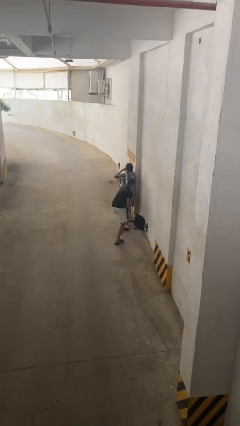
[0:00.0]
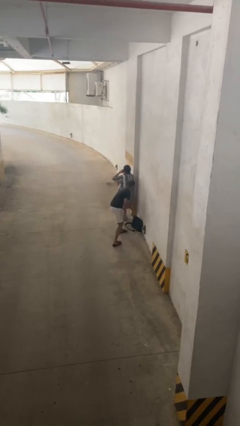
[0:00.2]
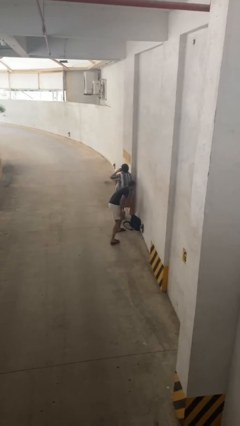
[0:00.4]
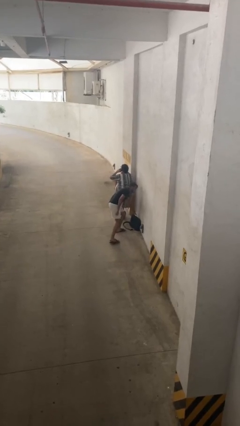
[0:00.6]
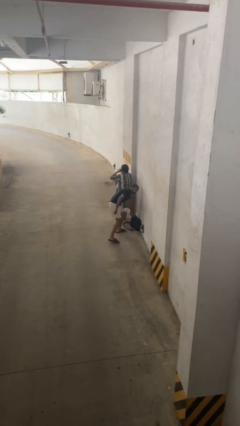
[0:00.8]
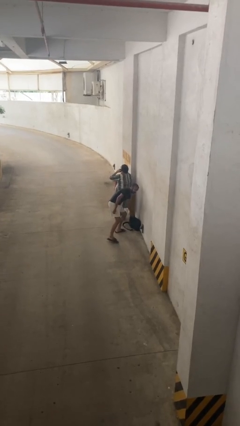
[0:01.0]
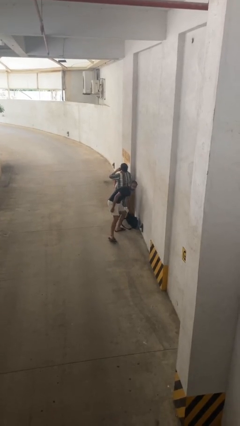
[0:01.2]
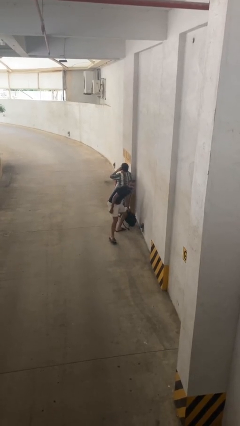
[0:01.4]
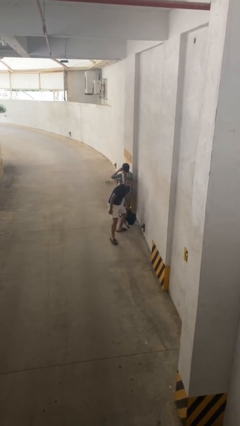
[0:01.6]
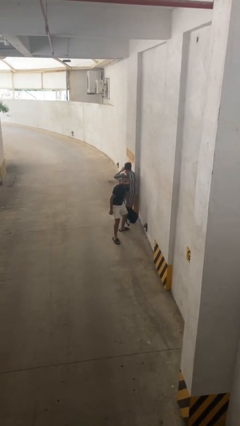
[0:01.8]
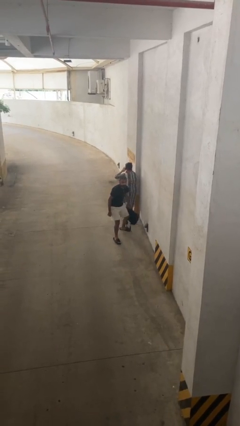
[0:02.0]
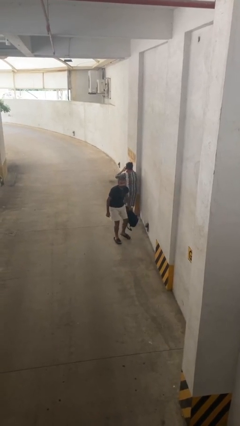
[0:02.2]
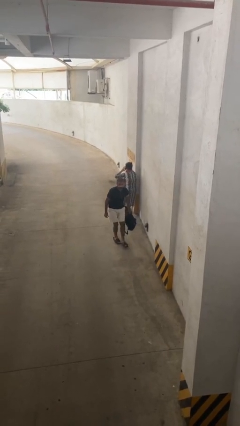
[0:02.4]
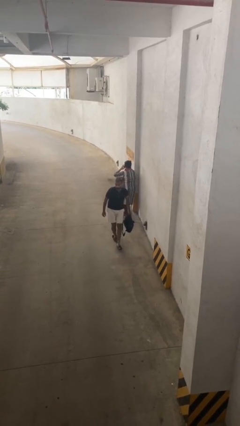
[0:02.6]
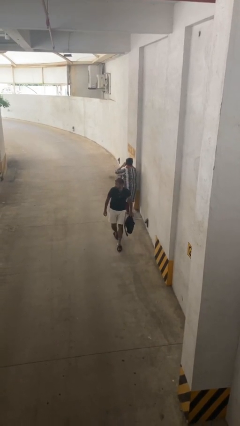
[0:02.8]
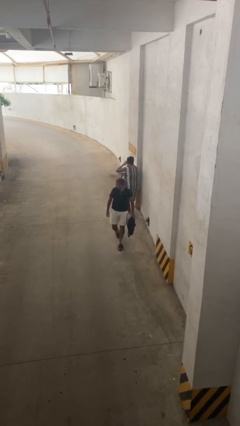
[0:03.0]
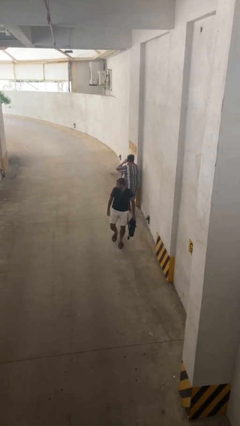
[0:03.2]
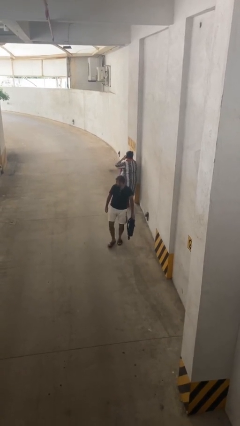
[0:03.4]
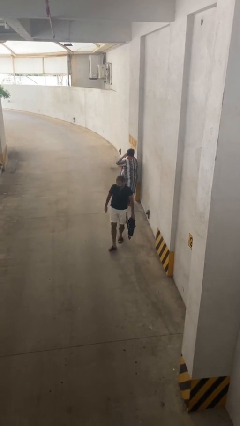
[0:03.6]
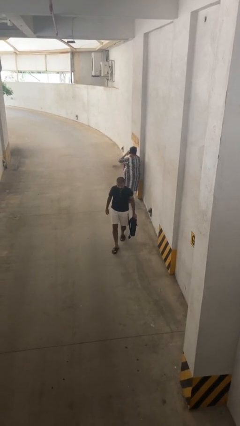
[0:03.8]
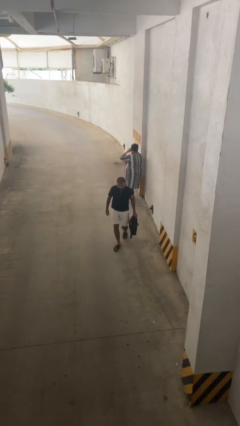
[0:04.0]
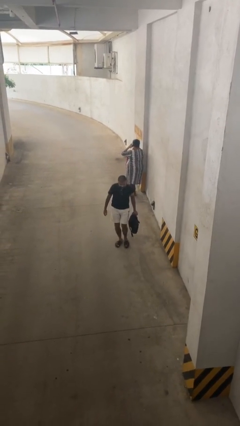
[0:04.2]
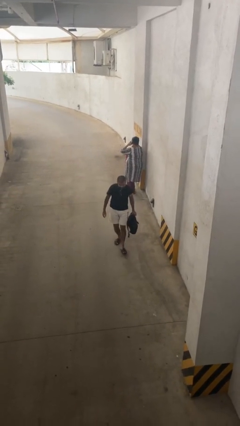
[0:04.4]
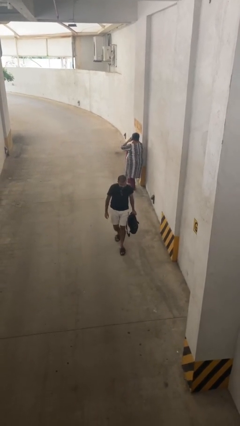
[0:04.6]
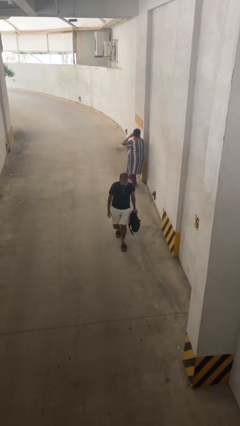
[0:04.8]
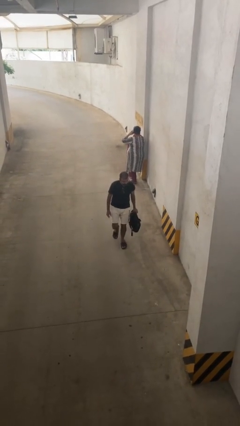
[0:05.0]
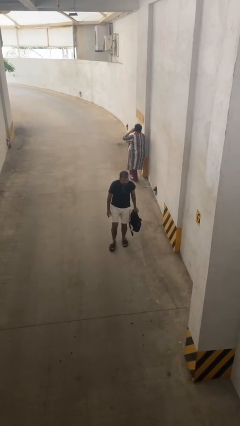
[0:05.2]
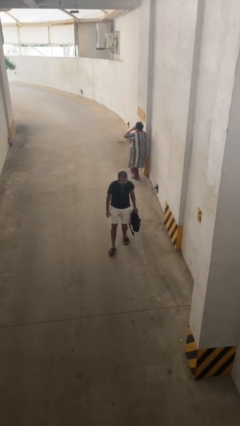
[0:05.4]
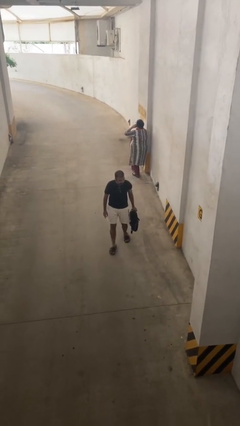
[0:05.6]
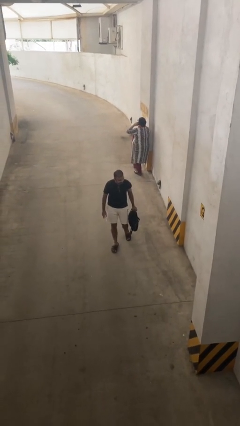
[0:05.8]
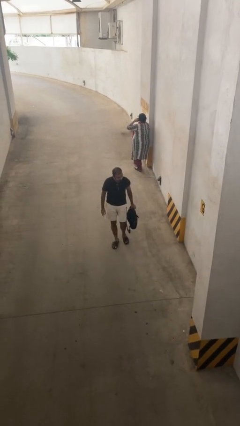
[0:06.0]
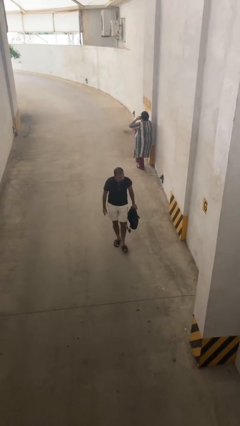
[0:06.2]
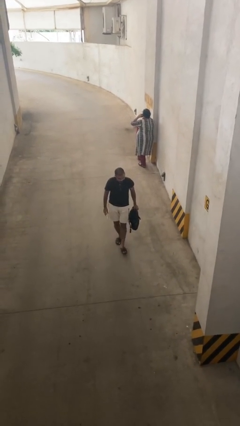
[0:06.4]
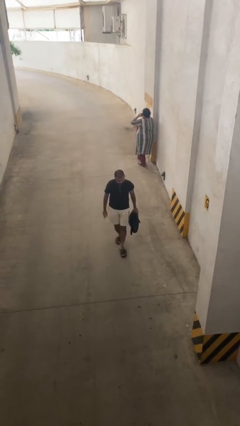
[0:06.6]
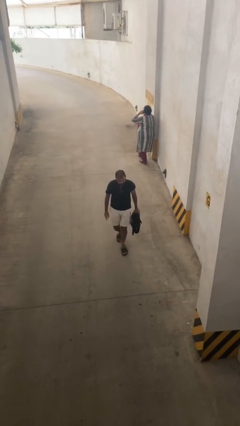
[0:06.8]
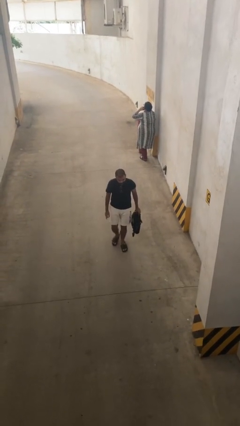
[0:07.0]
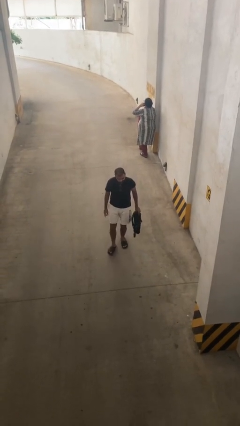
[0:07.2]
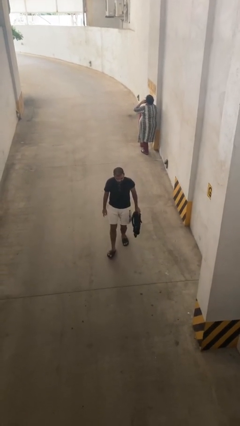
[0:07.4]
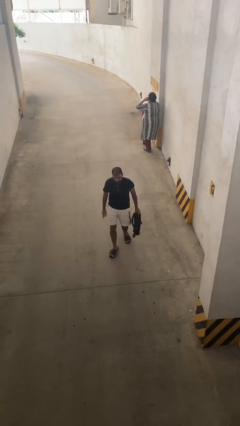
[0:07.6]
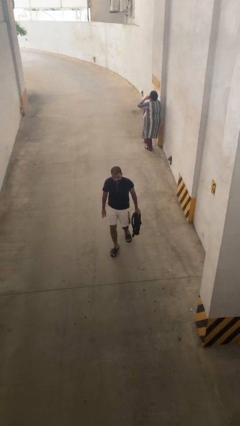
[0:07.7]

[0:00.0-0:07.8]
person steals object from person

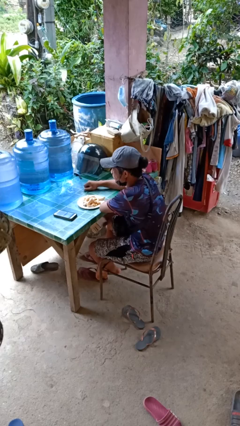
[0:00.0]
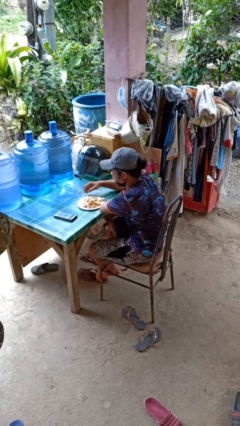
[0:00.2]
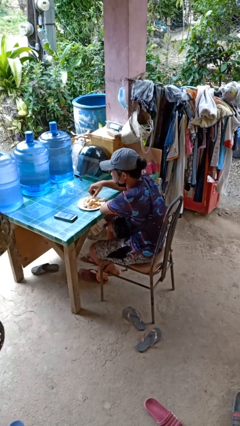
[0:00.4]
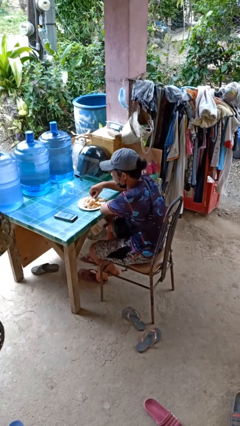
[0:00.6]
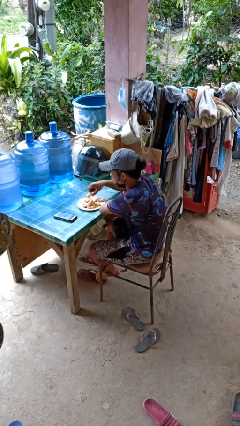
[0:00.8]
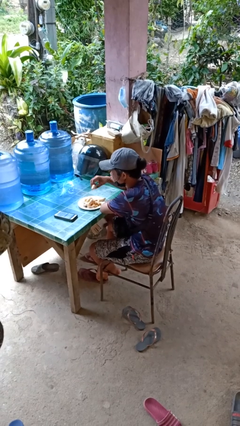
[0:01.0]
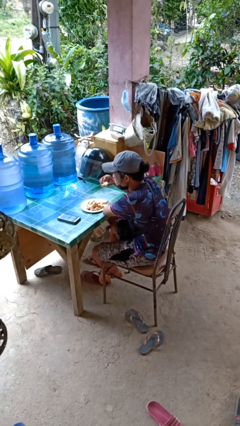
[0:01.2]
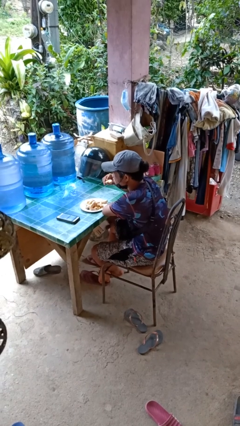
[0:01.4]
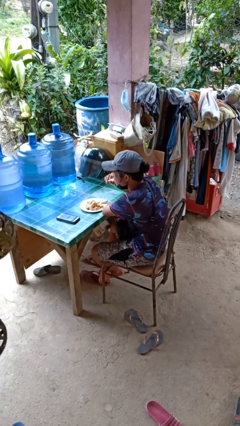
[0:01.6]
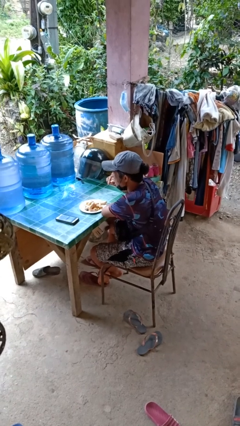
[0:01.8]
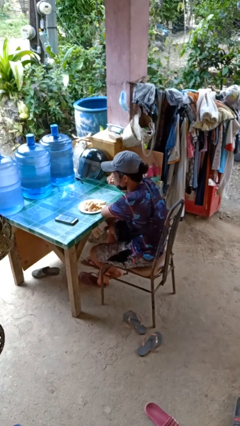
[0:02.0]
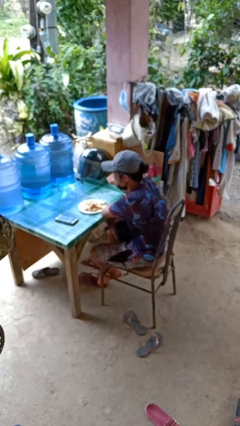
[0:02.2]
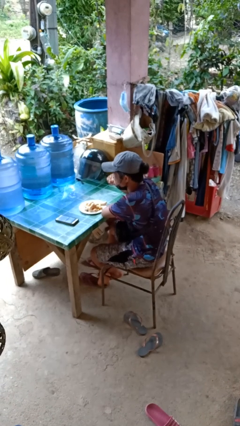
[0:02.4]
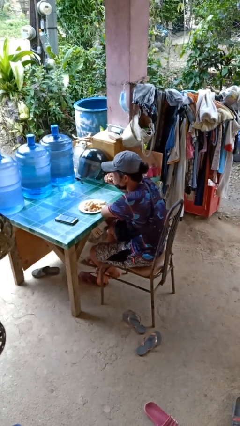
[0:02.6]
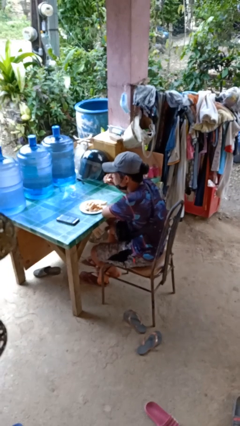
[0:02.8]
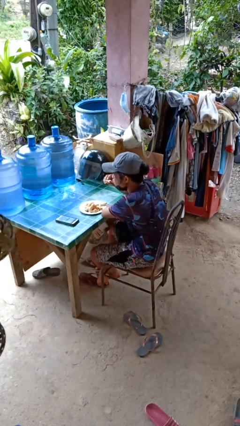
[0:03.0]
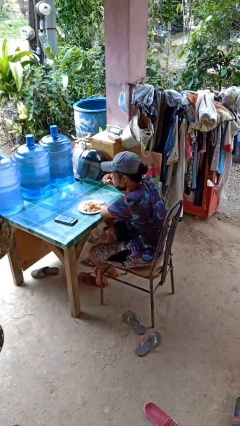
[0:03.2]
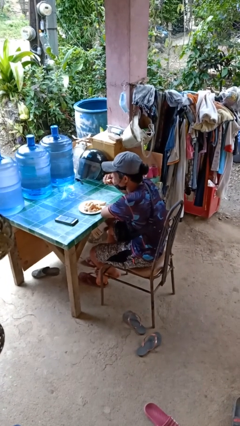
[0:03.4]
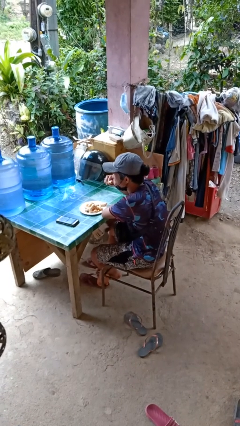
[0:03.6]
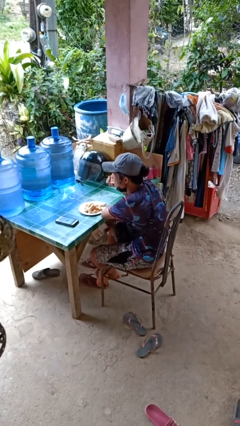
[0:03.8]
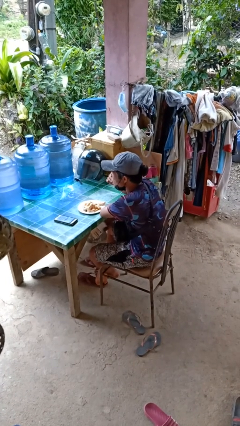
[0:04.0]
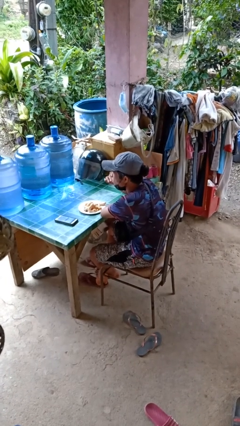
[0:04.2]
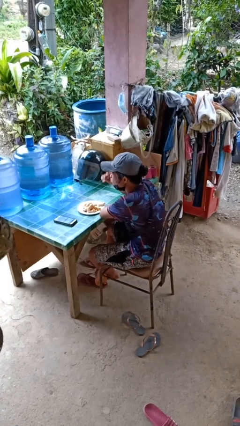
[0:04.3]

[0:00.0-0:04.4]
person eats with hands

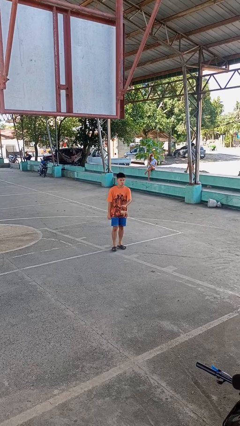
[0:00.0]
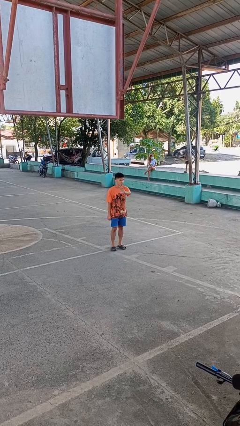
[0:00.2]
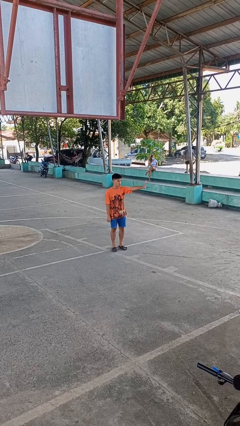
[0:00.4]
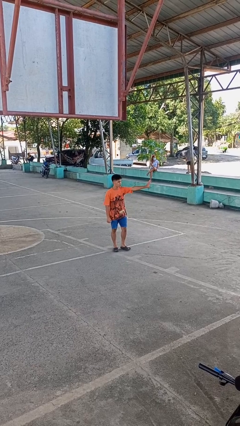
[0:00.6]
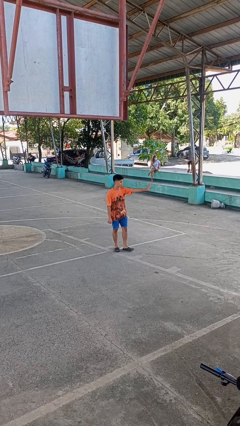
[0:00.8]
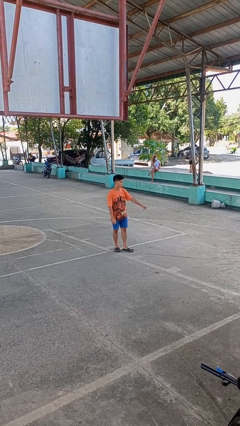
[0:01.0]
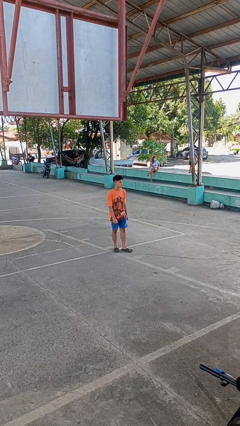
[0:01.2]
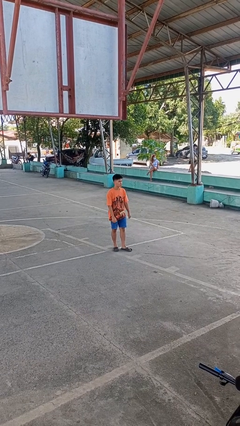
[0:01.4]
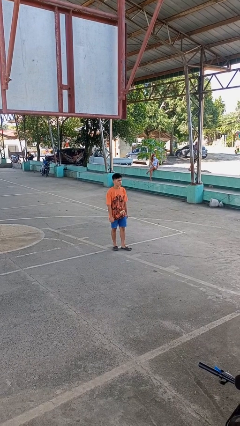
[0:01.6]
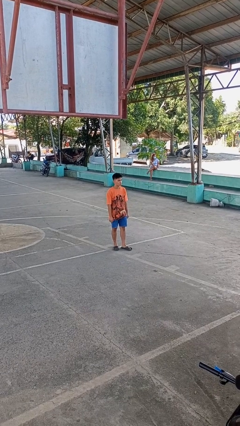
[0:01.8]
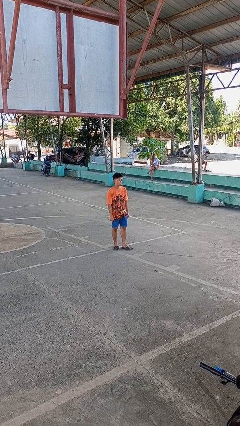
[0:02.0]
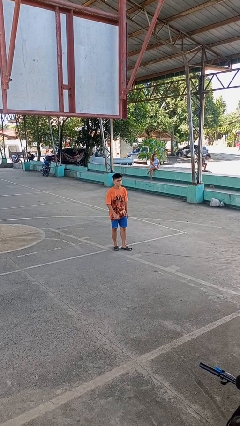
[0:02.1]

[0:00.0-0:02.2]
person gestures swipe left

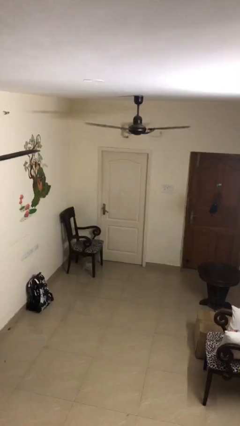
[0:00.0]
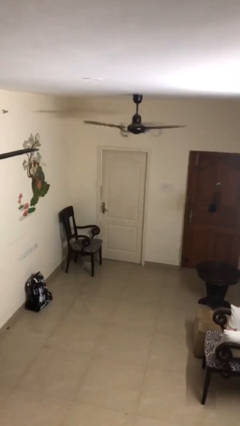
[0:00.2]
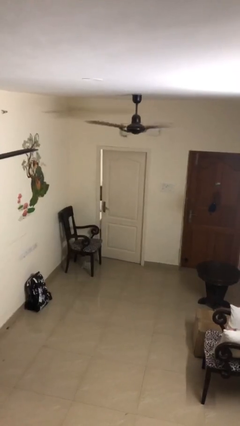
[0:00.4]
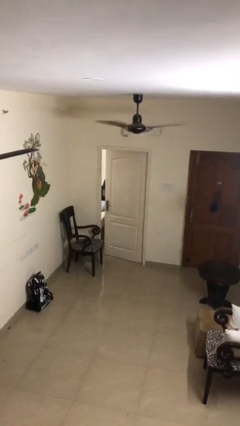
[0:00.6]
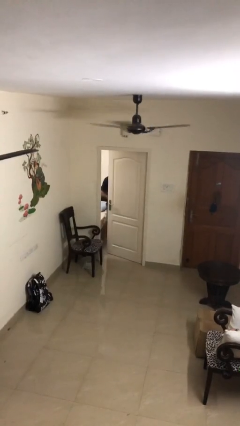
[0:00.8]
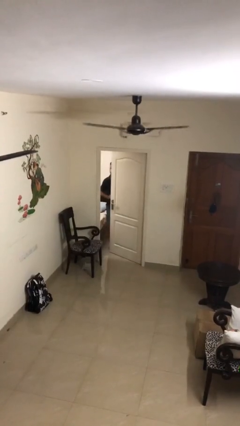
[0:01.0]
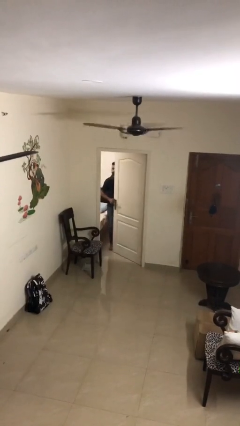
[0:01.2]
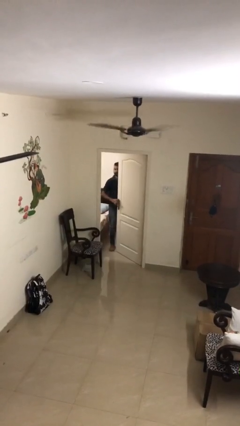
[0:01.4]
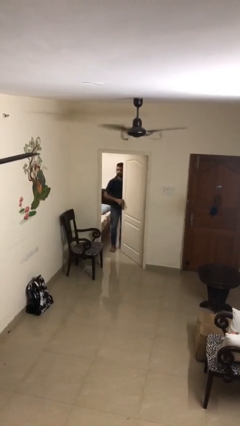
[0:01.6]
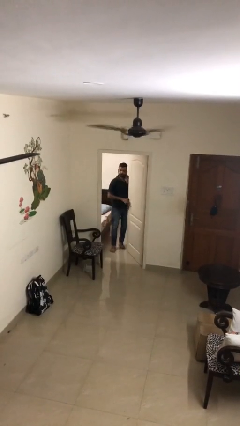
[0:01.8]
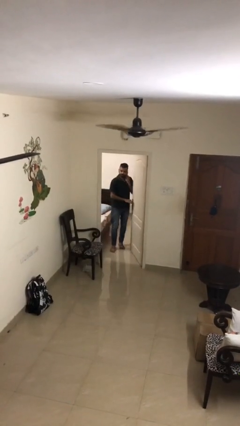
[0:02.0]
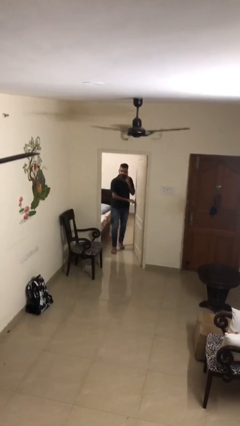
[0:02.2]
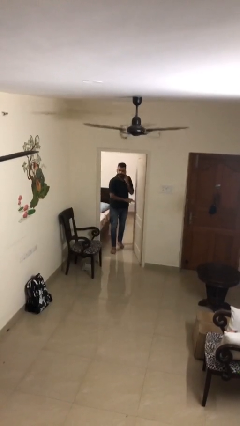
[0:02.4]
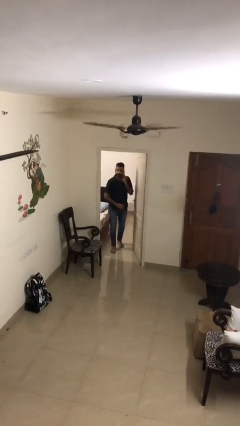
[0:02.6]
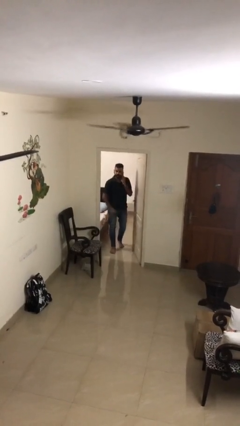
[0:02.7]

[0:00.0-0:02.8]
person opens facility door

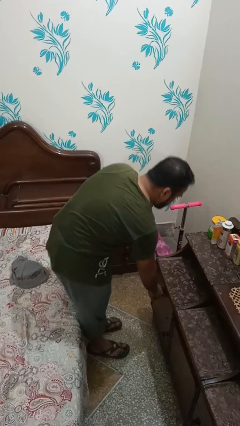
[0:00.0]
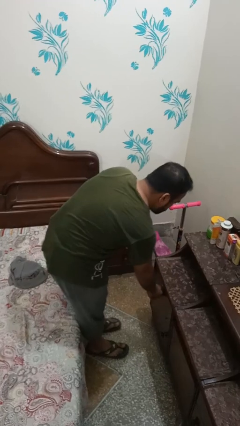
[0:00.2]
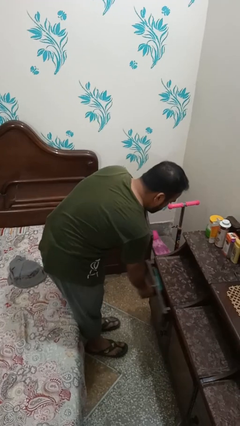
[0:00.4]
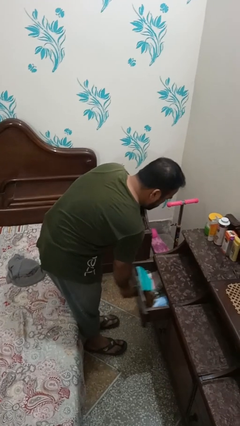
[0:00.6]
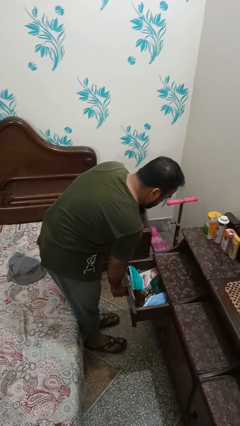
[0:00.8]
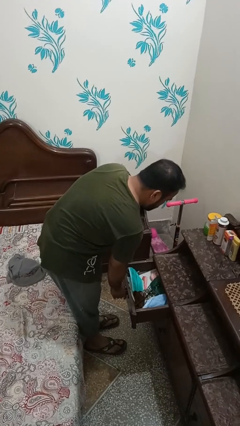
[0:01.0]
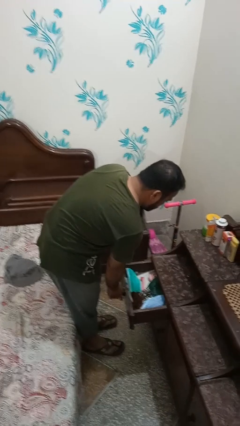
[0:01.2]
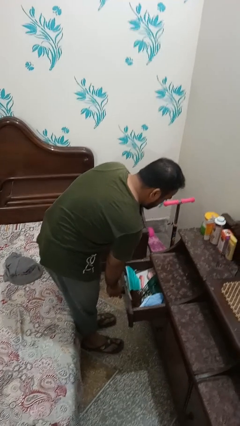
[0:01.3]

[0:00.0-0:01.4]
person opens dresser drawer
